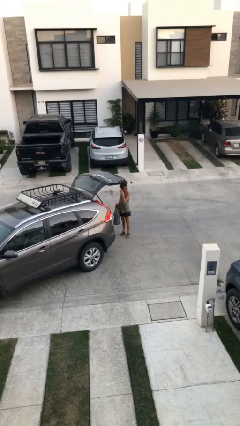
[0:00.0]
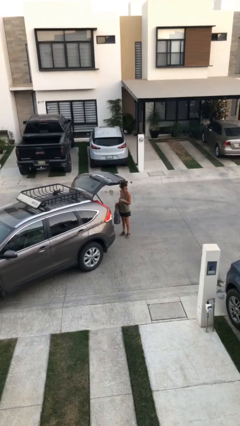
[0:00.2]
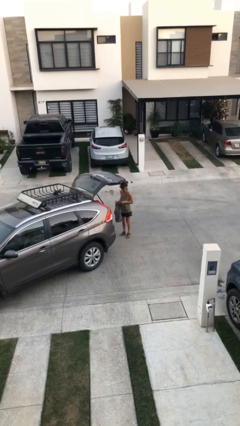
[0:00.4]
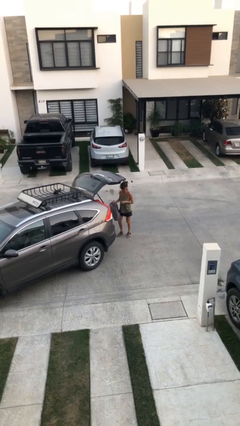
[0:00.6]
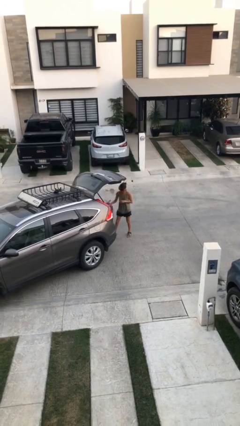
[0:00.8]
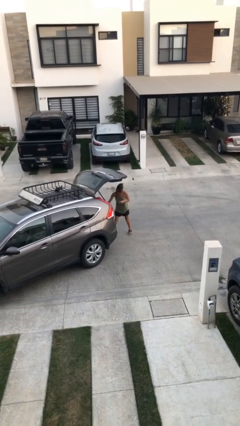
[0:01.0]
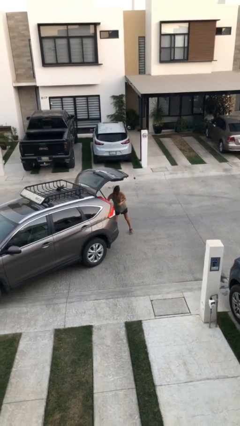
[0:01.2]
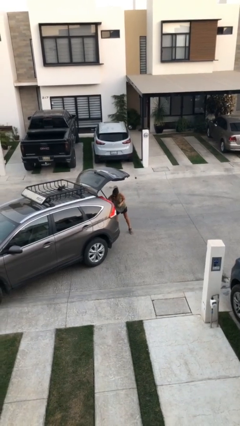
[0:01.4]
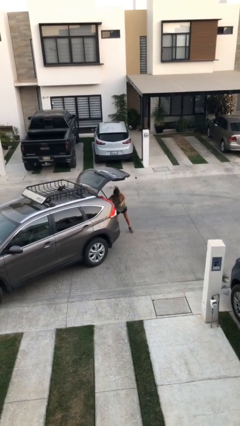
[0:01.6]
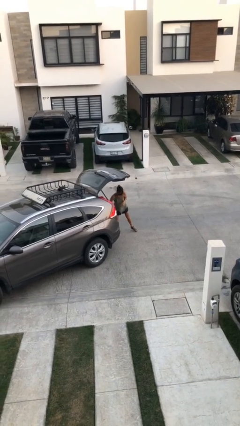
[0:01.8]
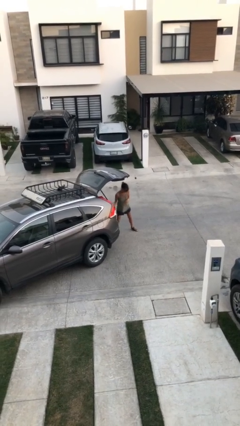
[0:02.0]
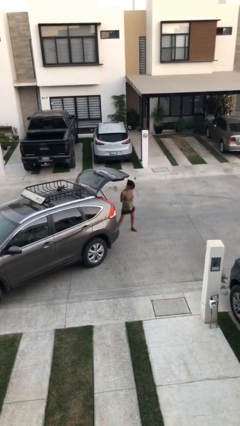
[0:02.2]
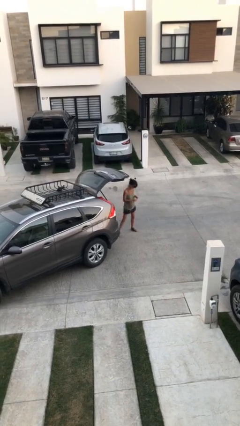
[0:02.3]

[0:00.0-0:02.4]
person loads car

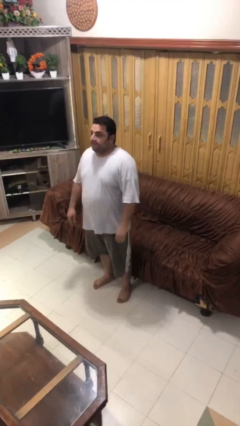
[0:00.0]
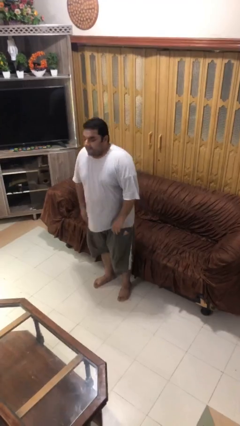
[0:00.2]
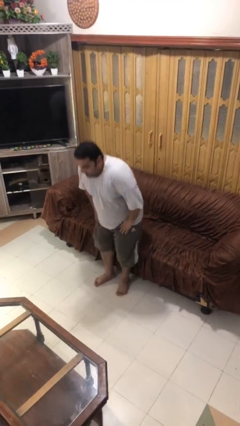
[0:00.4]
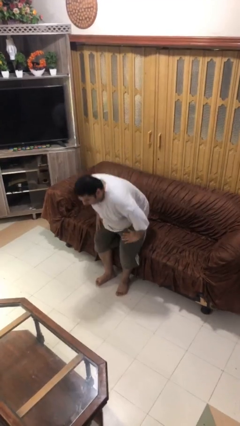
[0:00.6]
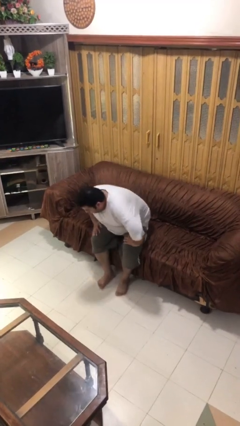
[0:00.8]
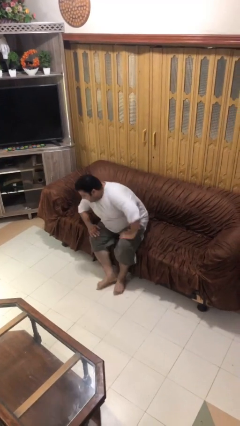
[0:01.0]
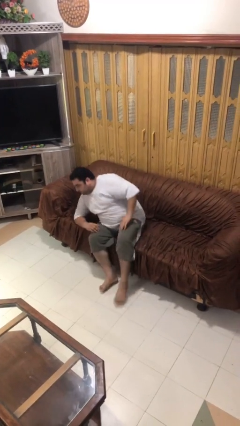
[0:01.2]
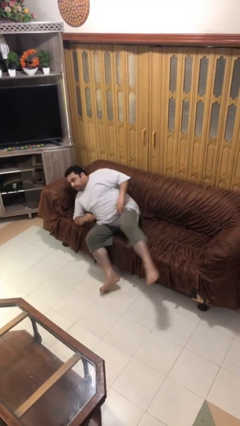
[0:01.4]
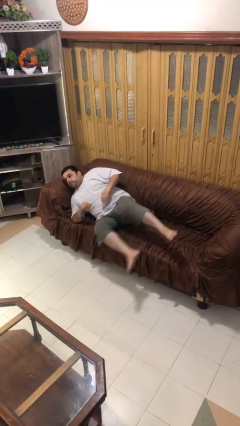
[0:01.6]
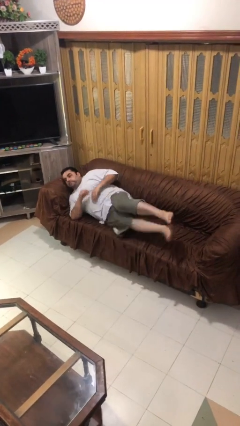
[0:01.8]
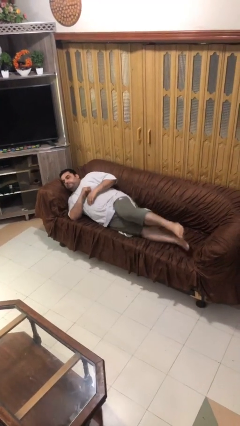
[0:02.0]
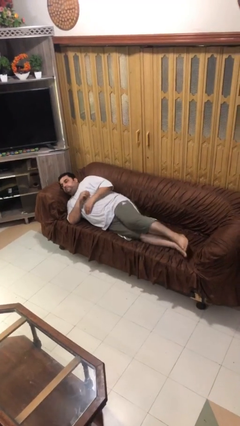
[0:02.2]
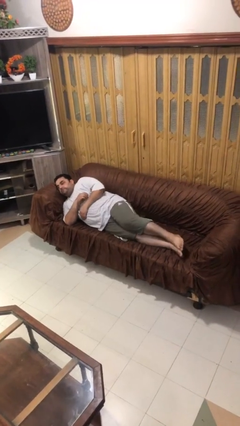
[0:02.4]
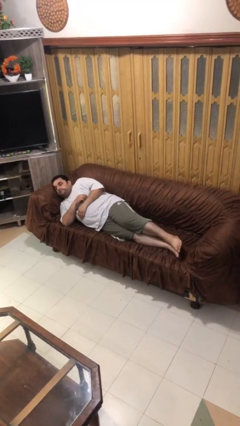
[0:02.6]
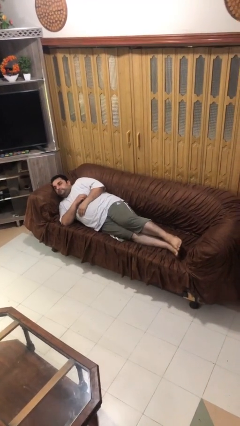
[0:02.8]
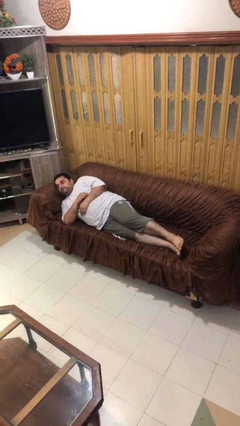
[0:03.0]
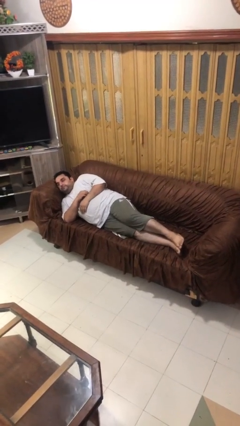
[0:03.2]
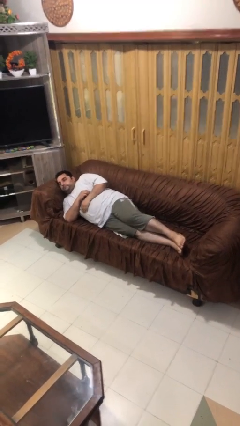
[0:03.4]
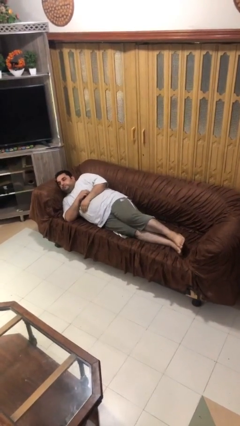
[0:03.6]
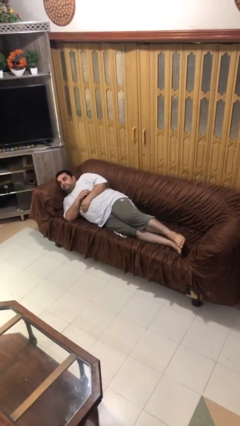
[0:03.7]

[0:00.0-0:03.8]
person lies down on couch

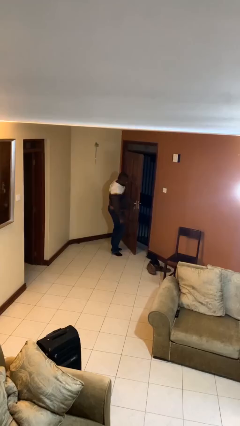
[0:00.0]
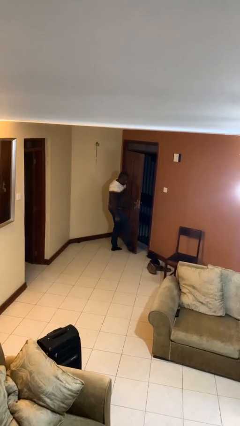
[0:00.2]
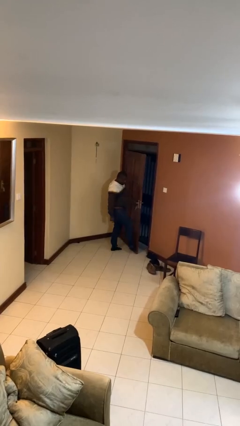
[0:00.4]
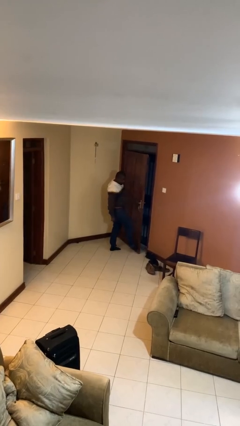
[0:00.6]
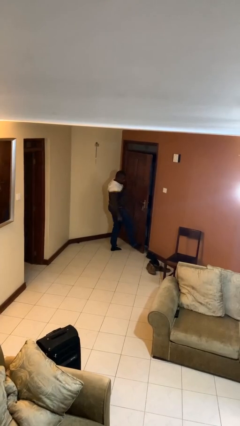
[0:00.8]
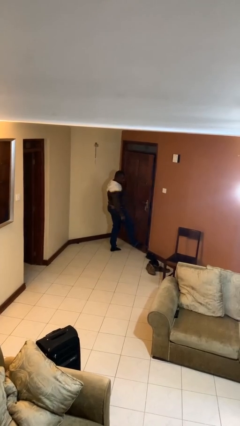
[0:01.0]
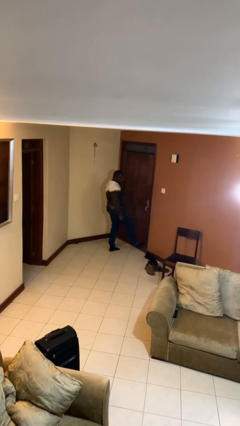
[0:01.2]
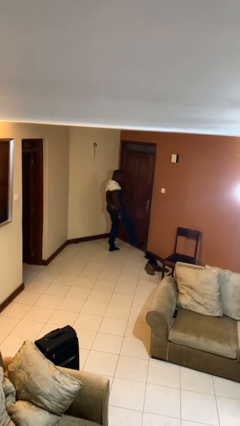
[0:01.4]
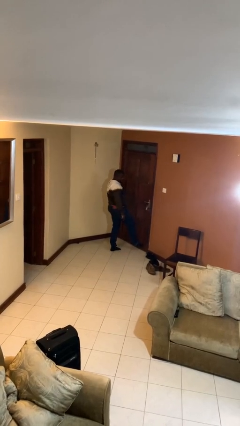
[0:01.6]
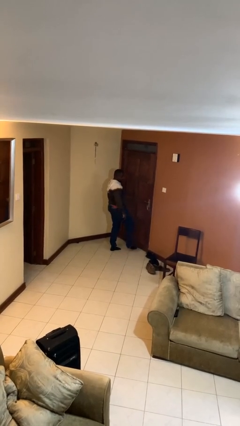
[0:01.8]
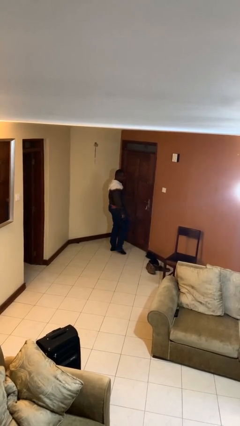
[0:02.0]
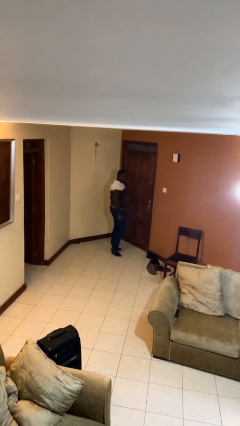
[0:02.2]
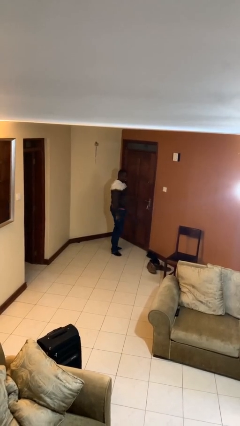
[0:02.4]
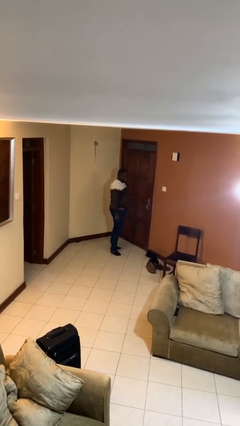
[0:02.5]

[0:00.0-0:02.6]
person closes door with foot

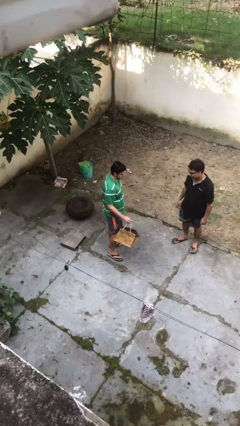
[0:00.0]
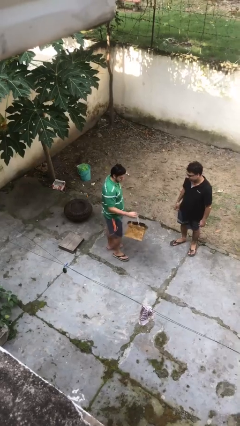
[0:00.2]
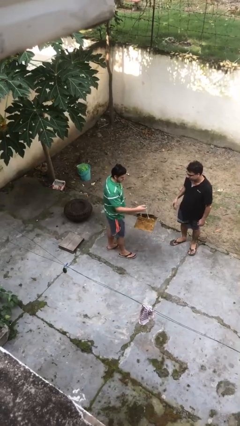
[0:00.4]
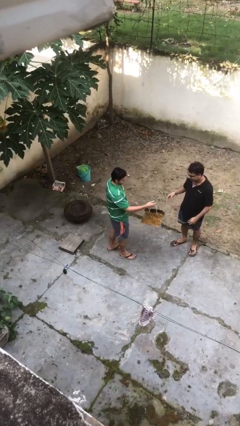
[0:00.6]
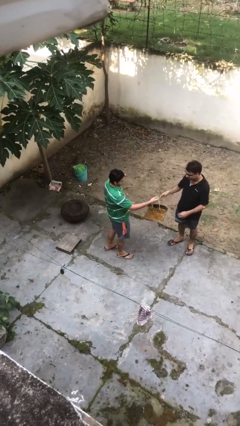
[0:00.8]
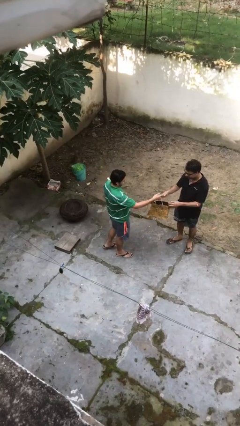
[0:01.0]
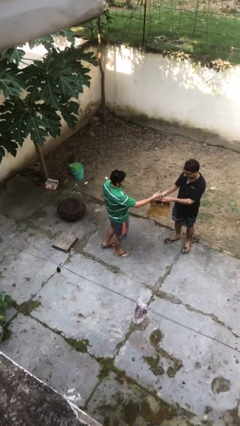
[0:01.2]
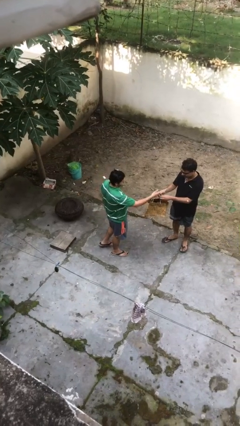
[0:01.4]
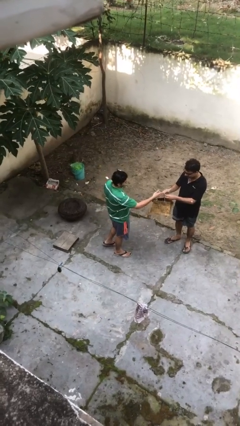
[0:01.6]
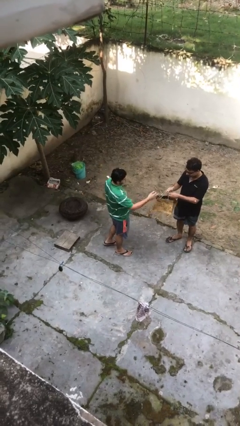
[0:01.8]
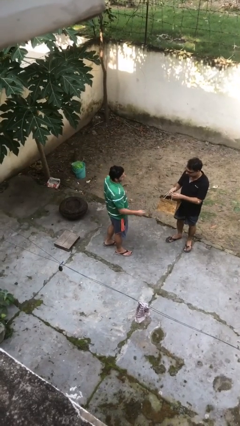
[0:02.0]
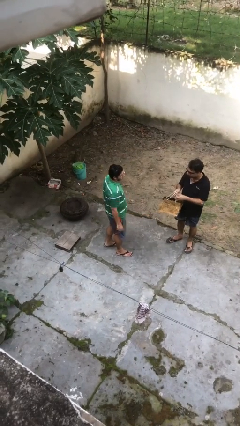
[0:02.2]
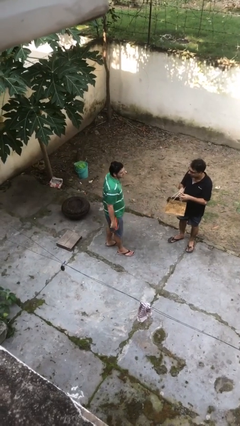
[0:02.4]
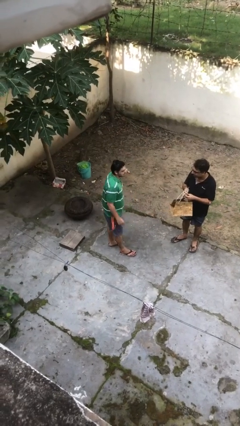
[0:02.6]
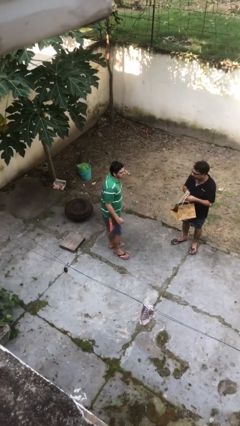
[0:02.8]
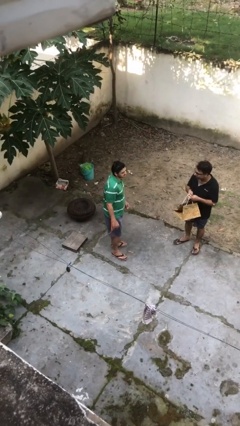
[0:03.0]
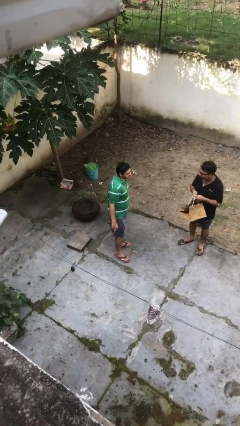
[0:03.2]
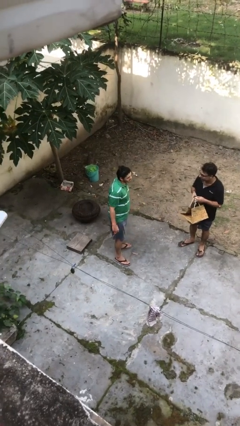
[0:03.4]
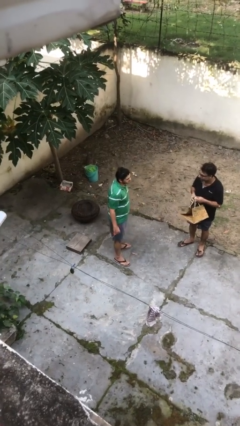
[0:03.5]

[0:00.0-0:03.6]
person transfers object to person

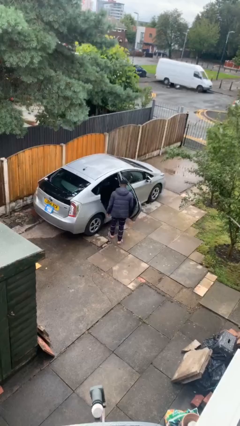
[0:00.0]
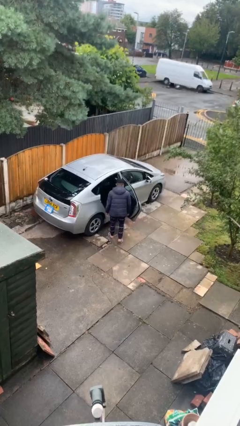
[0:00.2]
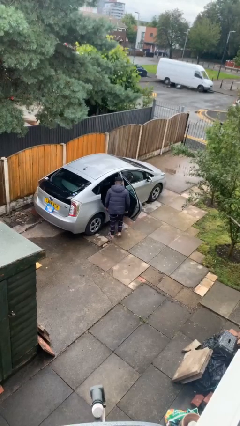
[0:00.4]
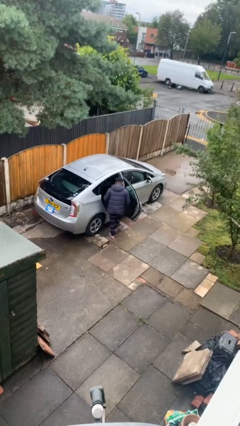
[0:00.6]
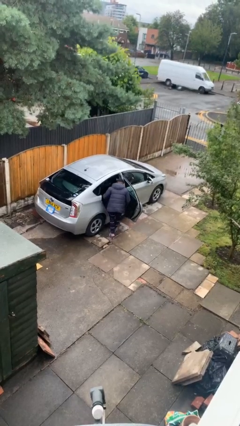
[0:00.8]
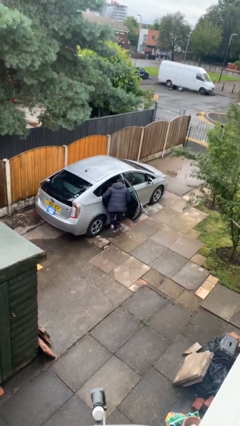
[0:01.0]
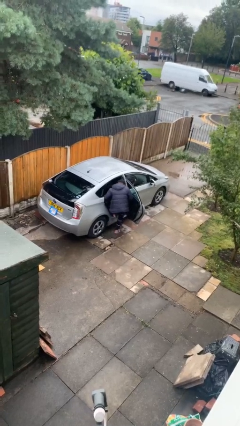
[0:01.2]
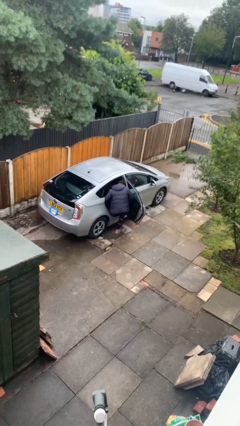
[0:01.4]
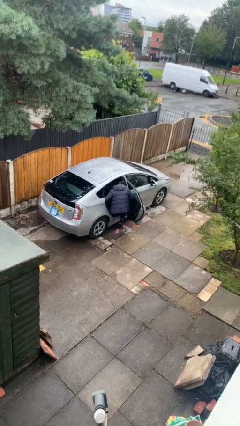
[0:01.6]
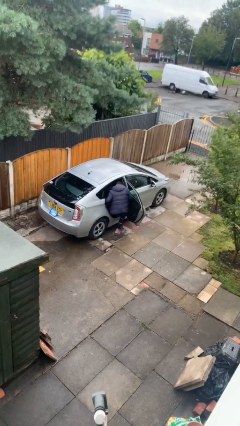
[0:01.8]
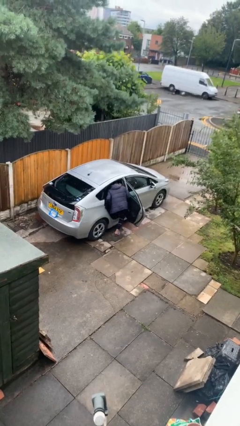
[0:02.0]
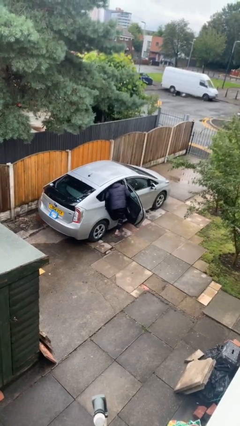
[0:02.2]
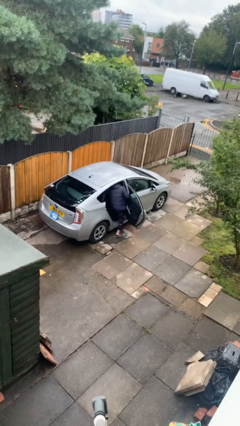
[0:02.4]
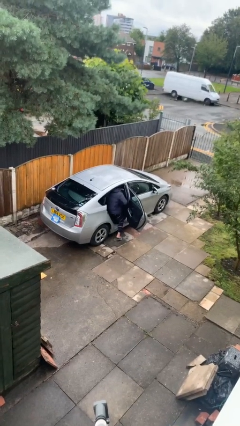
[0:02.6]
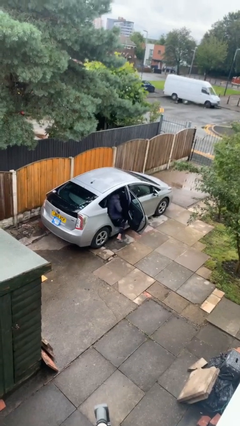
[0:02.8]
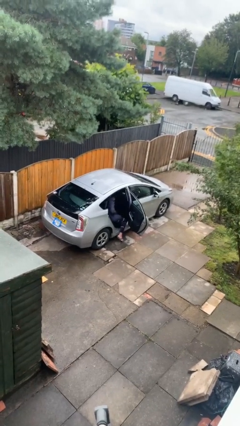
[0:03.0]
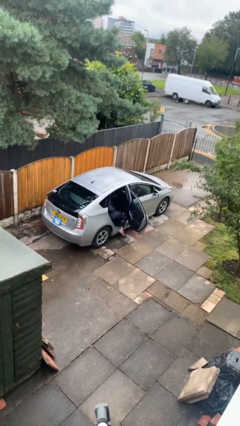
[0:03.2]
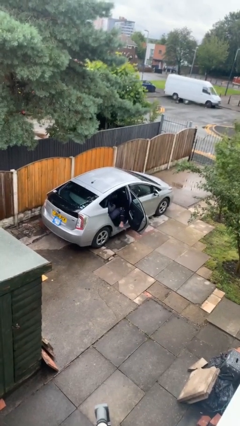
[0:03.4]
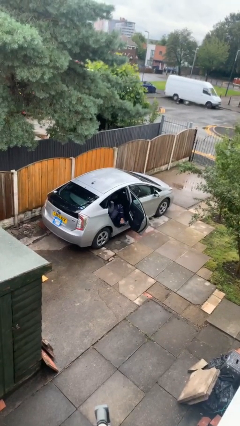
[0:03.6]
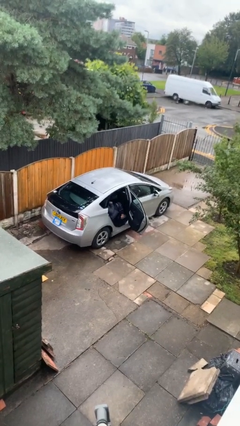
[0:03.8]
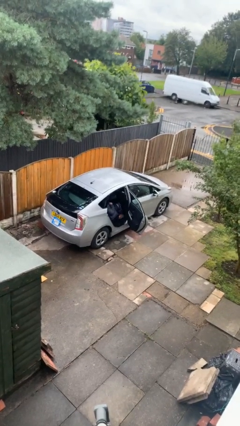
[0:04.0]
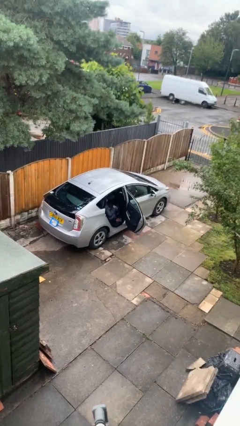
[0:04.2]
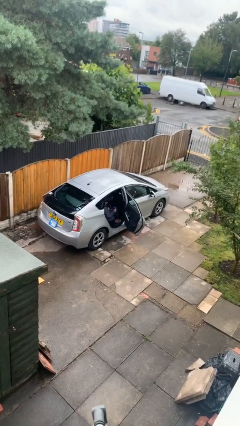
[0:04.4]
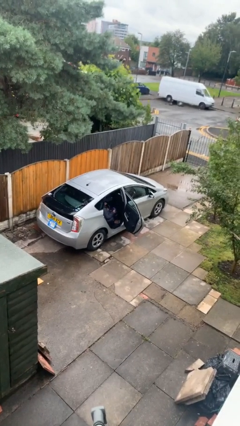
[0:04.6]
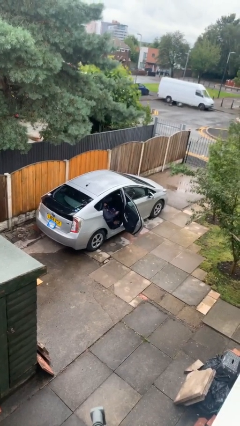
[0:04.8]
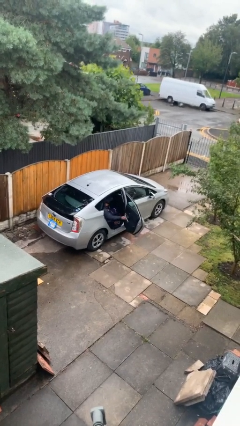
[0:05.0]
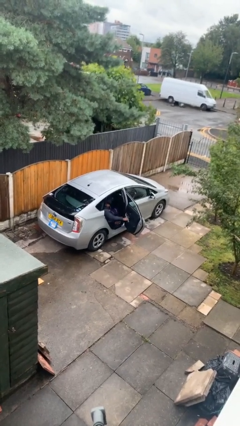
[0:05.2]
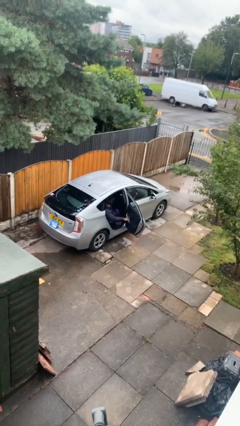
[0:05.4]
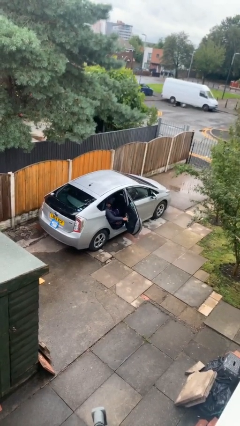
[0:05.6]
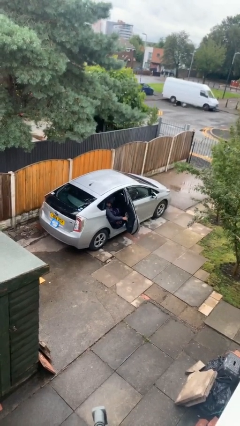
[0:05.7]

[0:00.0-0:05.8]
person enters car
